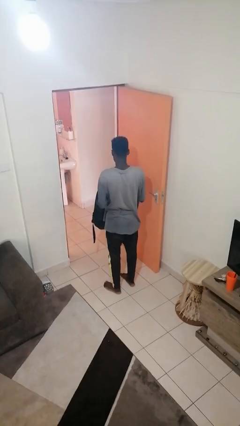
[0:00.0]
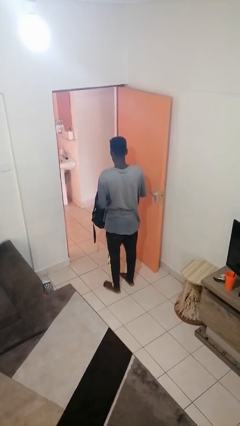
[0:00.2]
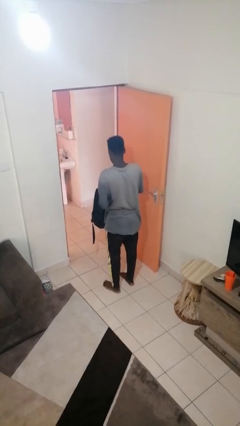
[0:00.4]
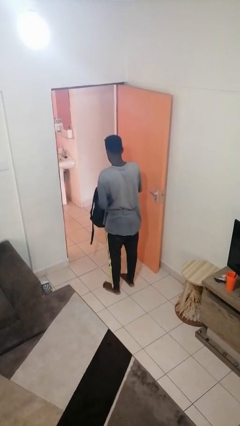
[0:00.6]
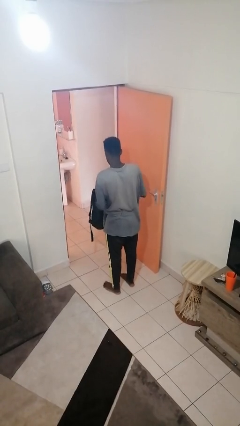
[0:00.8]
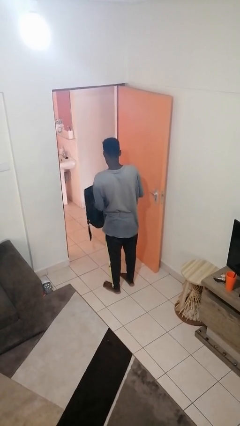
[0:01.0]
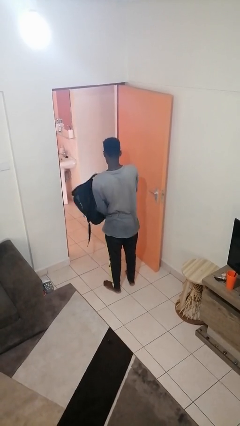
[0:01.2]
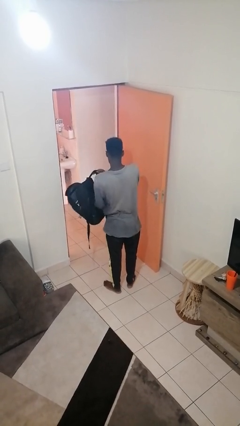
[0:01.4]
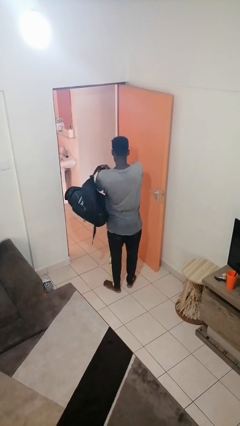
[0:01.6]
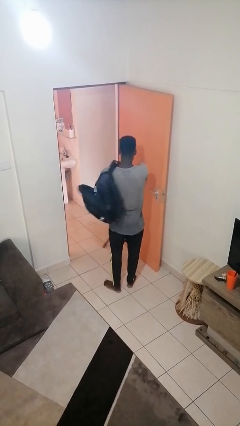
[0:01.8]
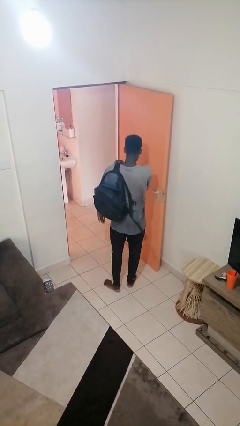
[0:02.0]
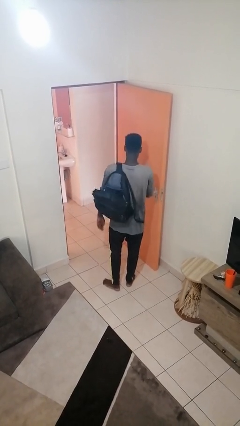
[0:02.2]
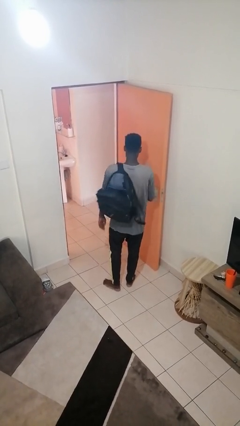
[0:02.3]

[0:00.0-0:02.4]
person puts object into backpack

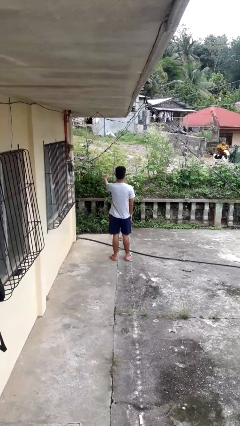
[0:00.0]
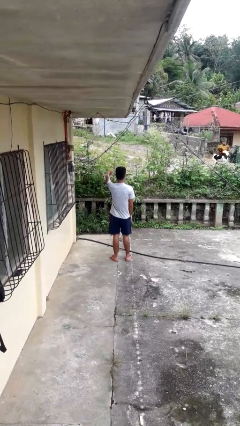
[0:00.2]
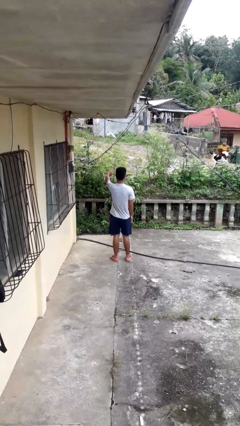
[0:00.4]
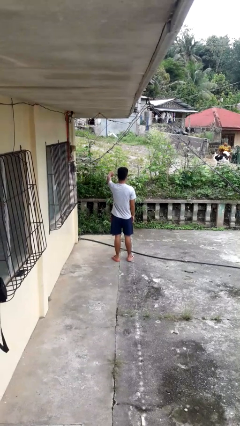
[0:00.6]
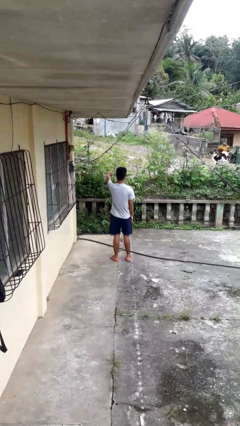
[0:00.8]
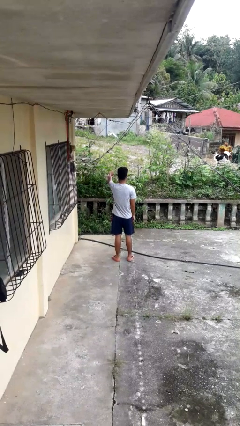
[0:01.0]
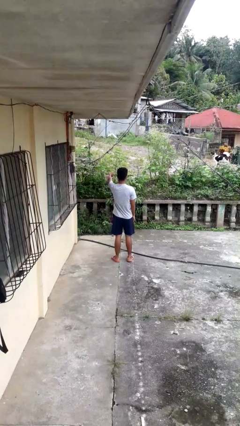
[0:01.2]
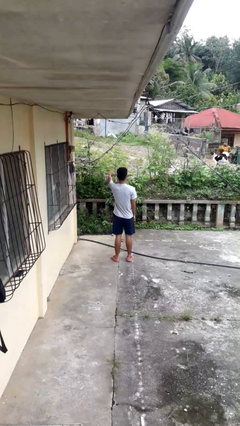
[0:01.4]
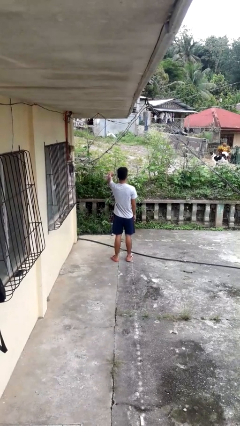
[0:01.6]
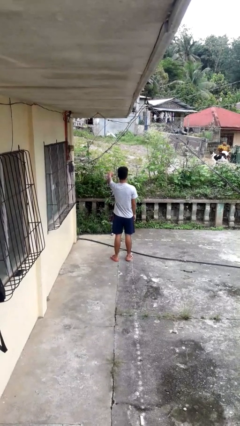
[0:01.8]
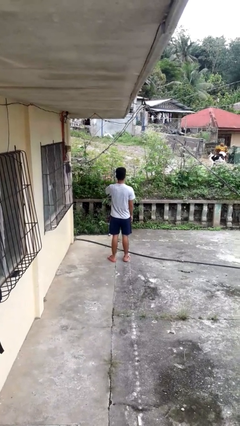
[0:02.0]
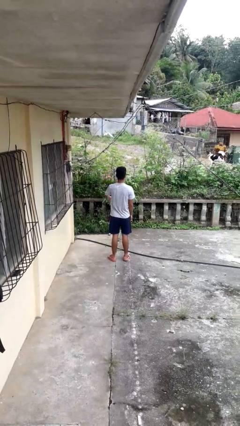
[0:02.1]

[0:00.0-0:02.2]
person gestures thumbs down

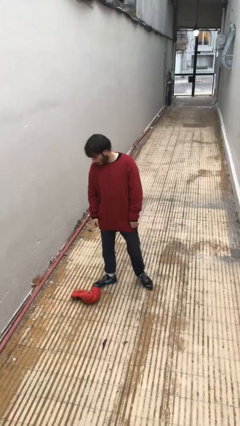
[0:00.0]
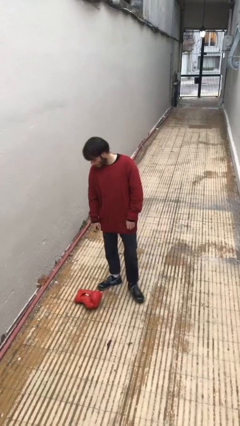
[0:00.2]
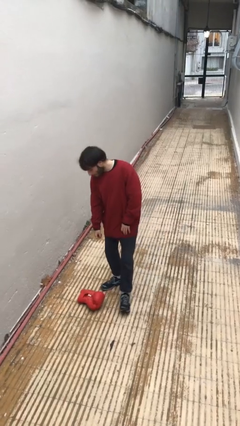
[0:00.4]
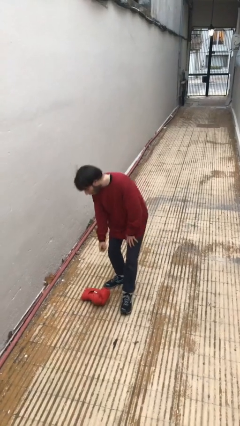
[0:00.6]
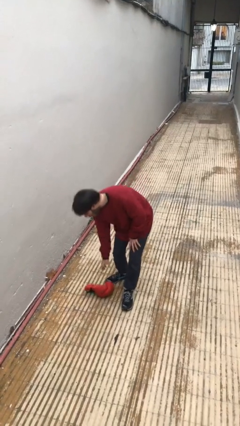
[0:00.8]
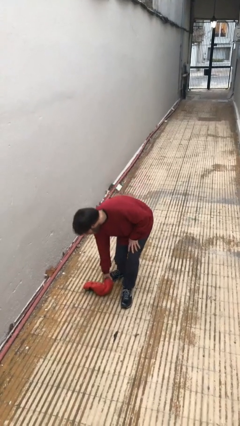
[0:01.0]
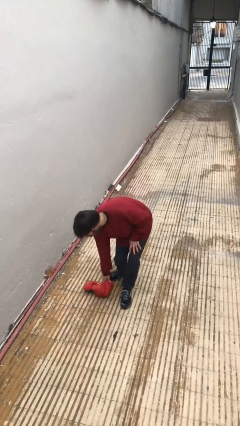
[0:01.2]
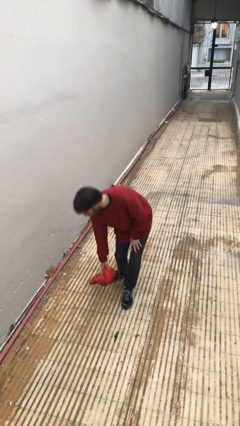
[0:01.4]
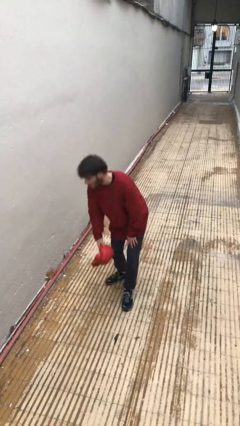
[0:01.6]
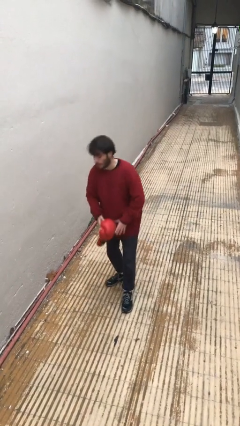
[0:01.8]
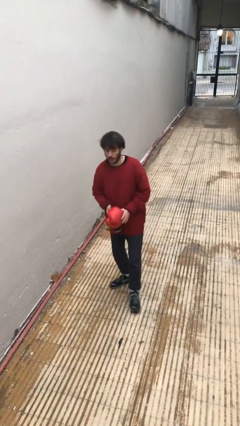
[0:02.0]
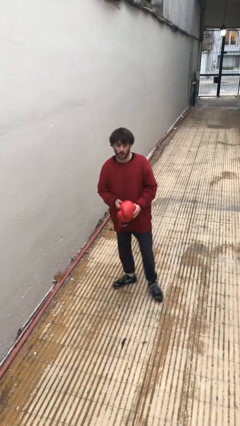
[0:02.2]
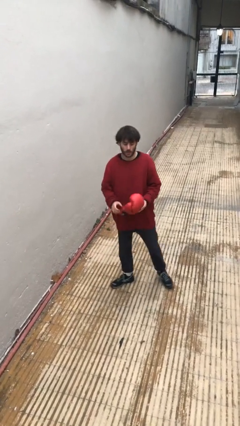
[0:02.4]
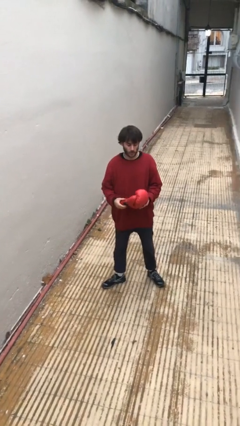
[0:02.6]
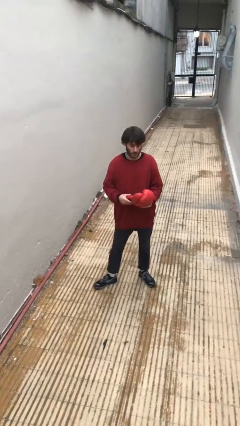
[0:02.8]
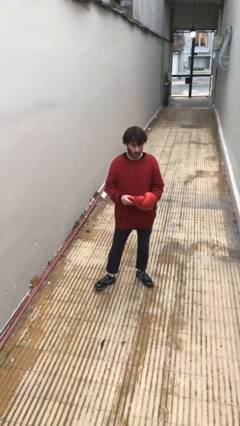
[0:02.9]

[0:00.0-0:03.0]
person picks up object from floor

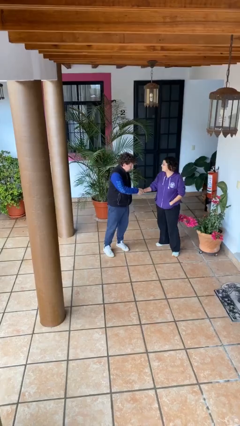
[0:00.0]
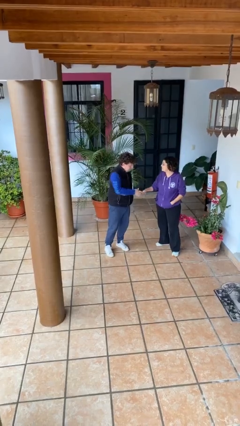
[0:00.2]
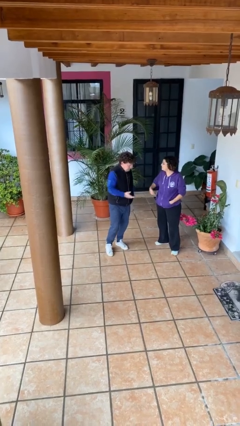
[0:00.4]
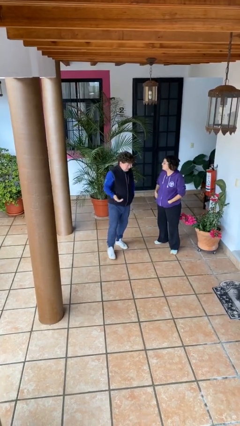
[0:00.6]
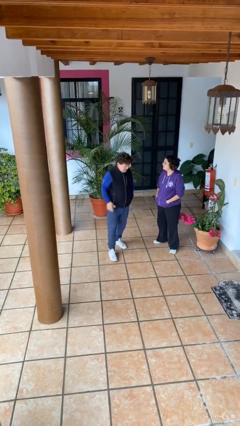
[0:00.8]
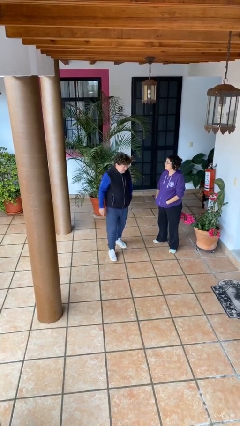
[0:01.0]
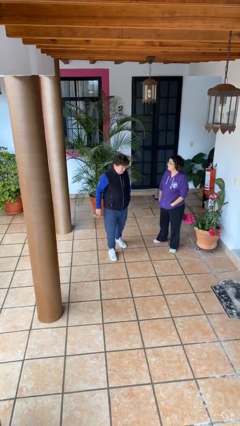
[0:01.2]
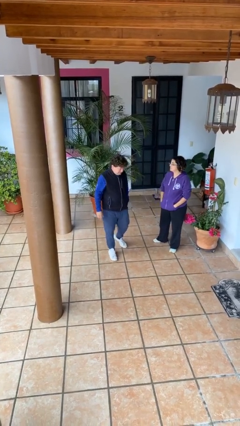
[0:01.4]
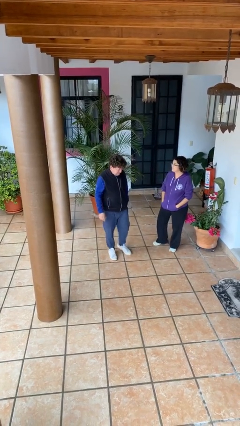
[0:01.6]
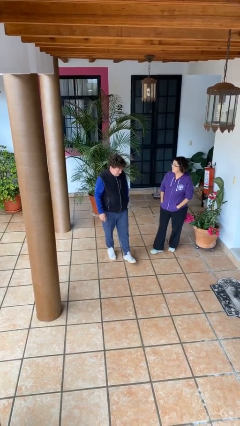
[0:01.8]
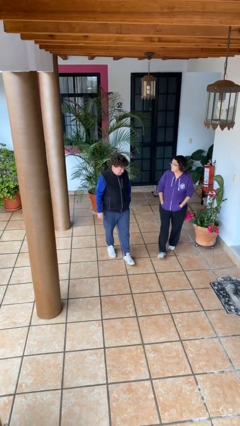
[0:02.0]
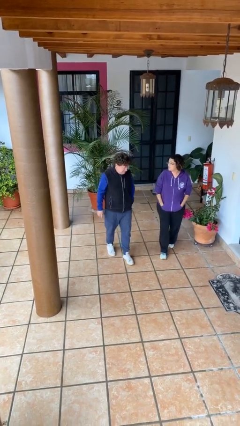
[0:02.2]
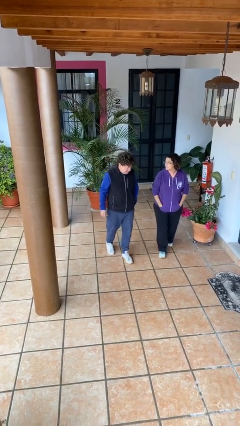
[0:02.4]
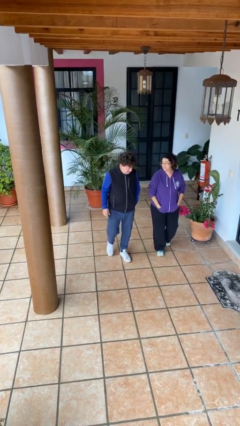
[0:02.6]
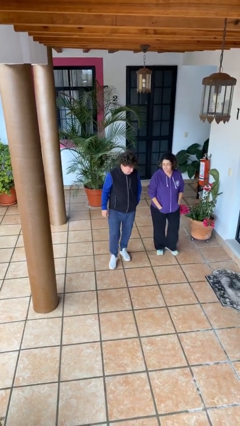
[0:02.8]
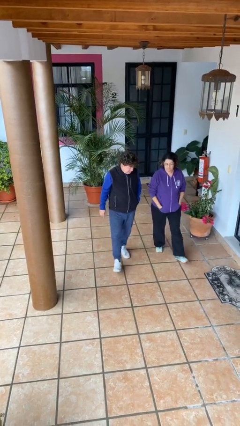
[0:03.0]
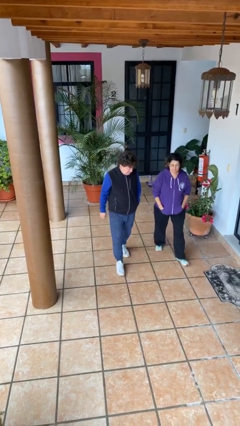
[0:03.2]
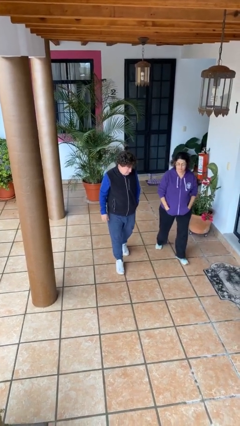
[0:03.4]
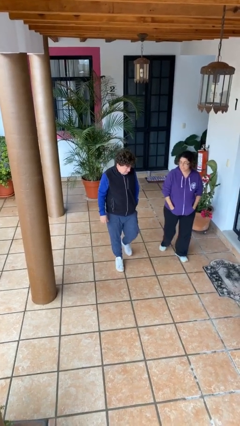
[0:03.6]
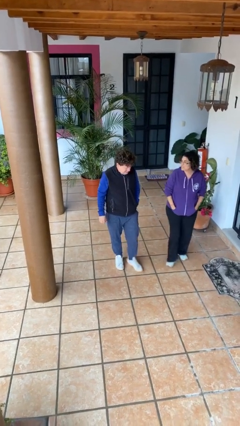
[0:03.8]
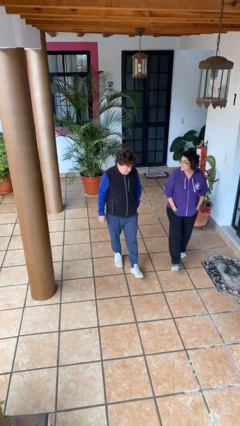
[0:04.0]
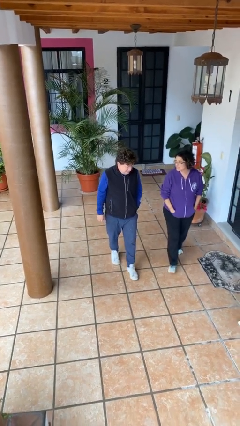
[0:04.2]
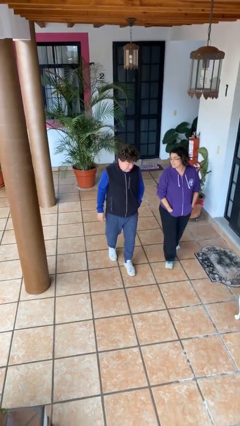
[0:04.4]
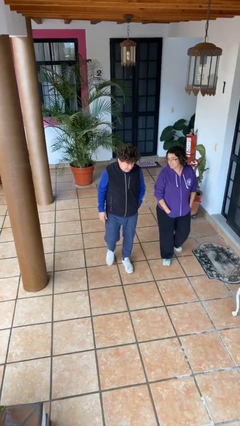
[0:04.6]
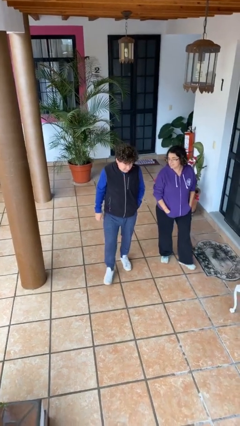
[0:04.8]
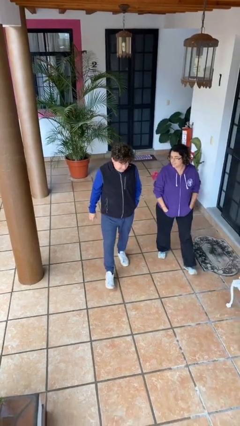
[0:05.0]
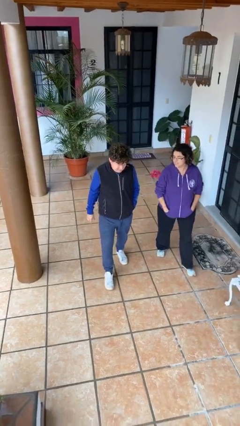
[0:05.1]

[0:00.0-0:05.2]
person talks to person

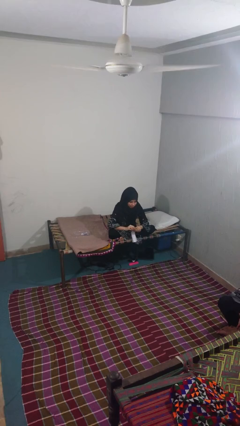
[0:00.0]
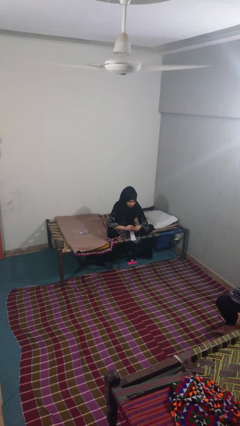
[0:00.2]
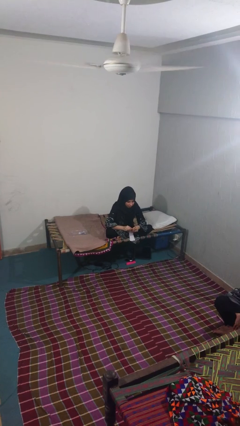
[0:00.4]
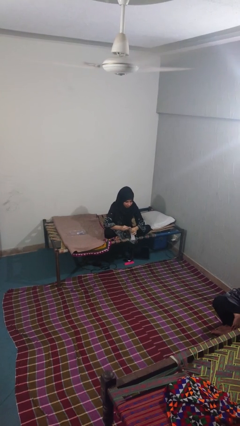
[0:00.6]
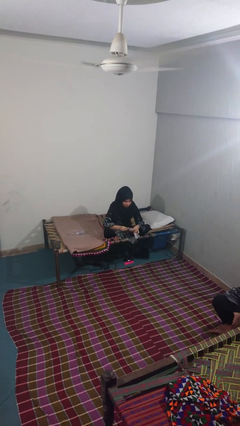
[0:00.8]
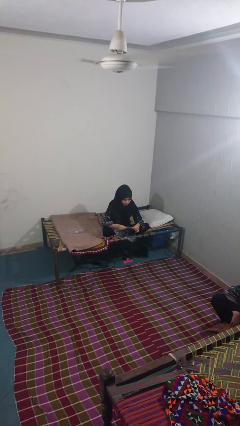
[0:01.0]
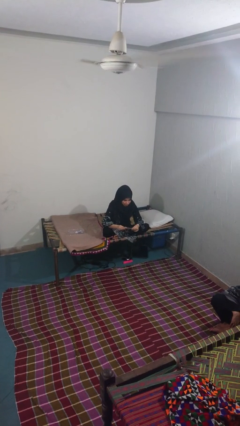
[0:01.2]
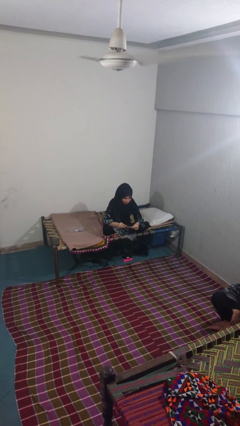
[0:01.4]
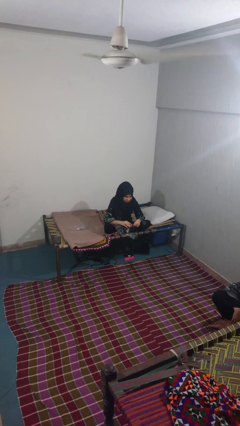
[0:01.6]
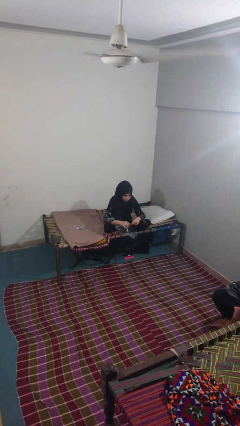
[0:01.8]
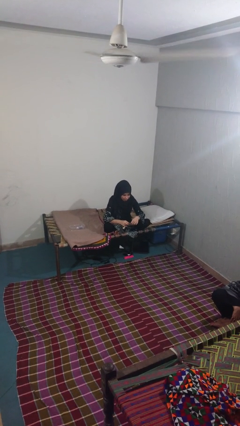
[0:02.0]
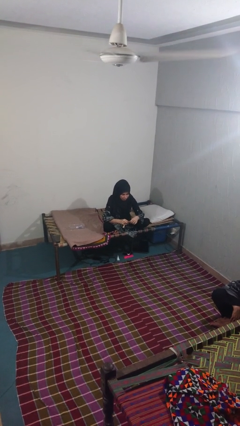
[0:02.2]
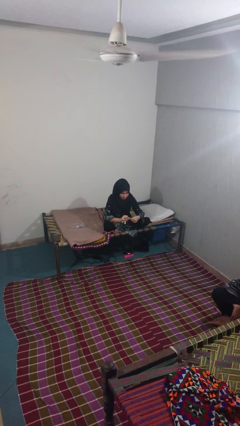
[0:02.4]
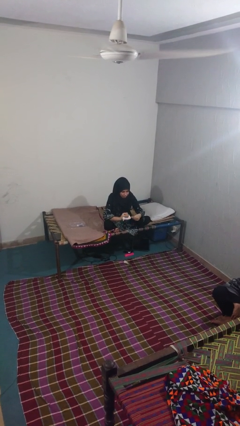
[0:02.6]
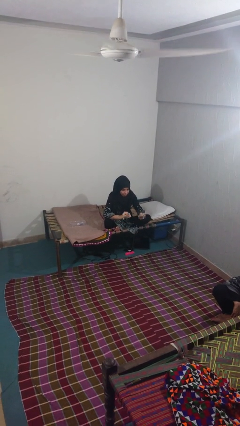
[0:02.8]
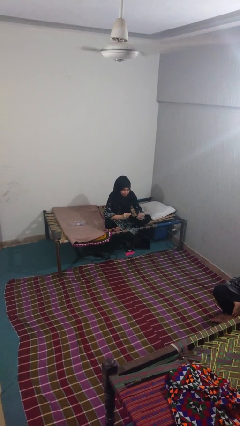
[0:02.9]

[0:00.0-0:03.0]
person tears paper

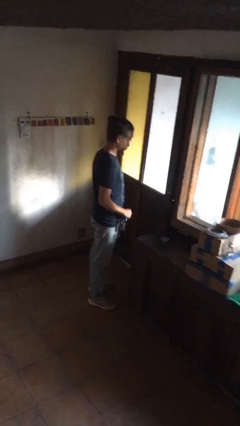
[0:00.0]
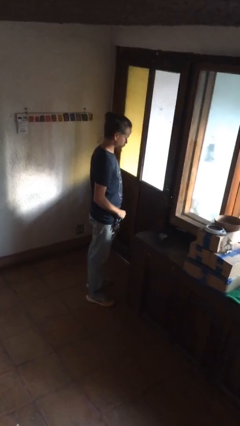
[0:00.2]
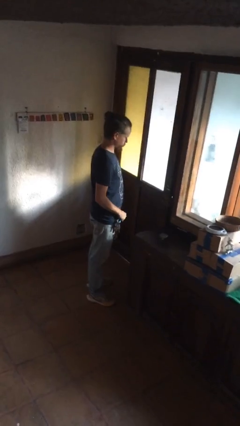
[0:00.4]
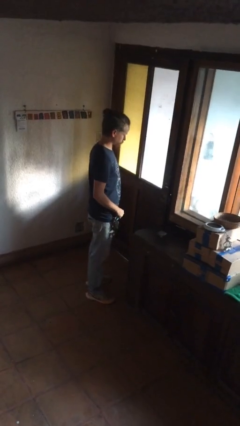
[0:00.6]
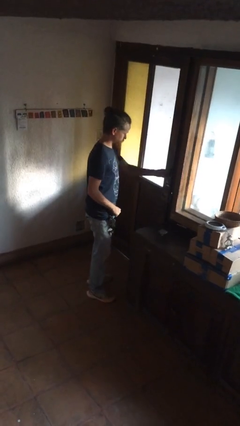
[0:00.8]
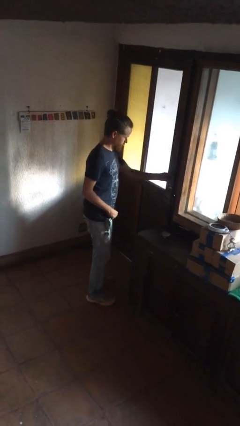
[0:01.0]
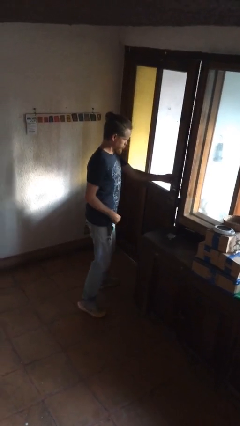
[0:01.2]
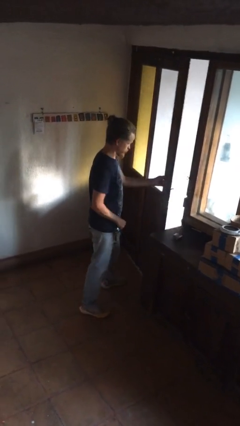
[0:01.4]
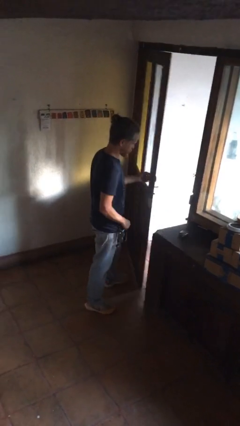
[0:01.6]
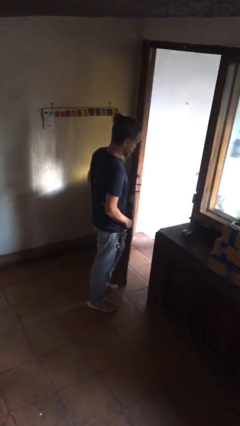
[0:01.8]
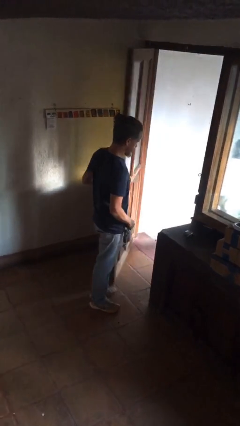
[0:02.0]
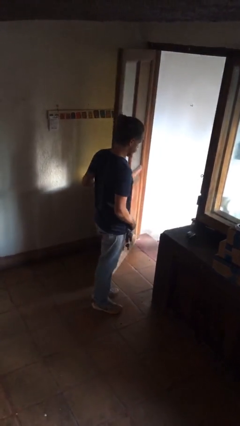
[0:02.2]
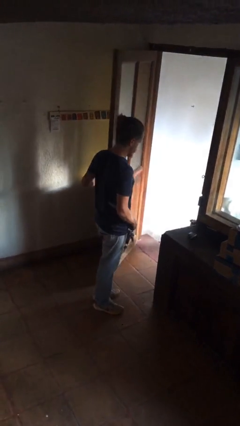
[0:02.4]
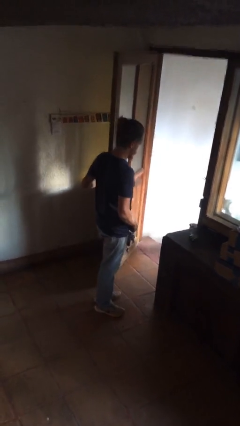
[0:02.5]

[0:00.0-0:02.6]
person opens facility door
